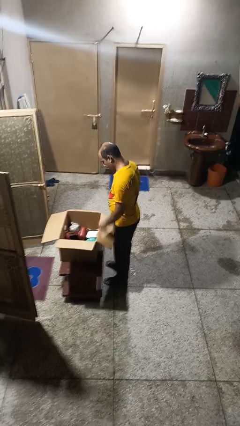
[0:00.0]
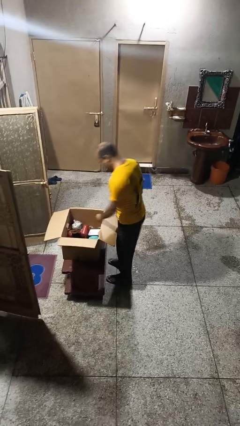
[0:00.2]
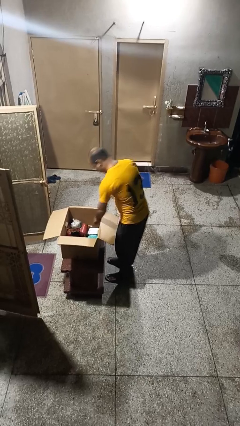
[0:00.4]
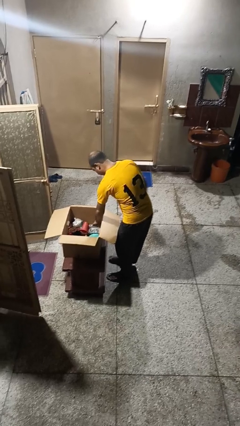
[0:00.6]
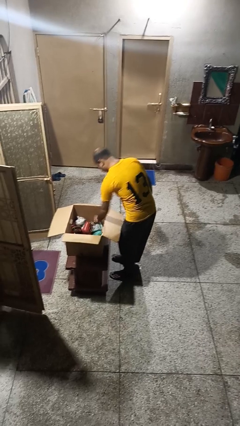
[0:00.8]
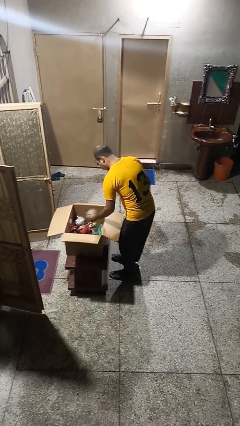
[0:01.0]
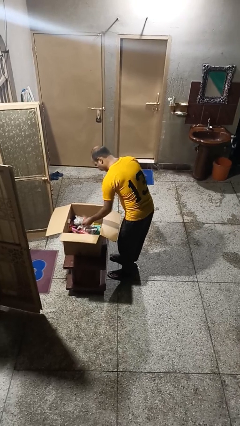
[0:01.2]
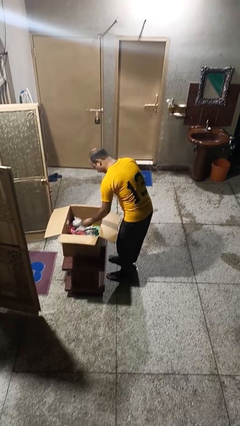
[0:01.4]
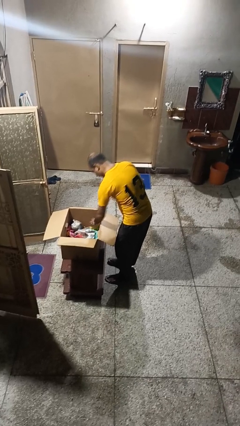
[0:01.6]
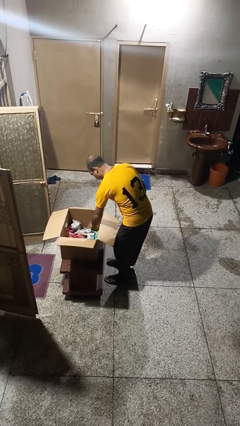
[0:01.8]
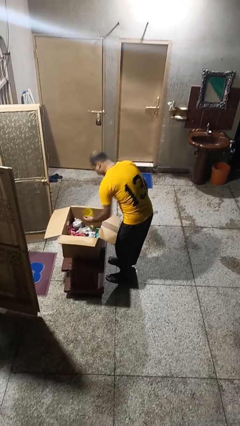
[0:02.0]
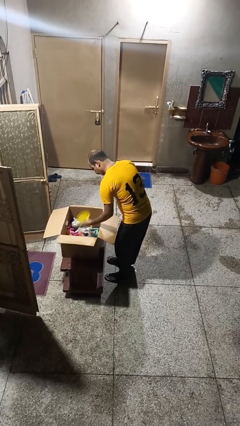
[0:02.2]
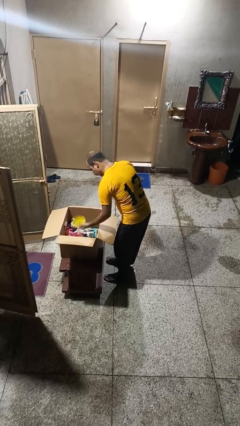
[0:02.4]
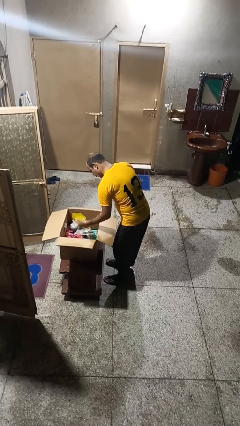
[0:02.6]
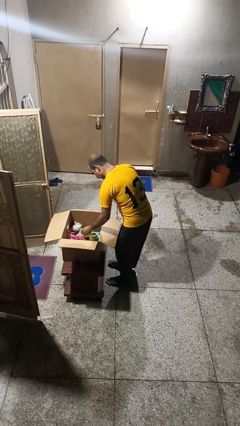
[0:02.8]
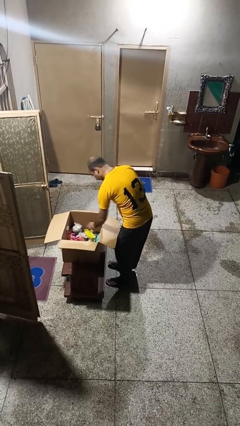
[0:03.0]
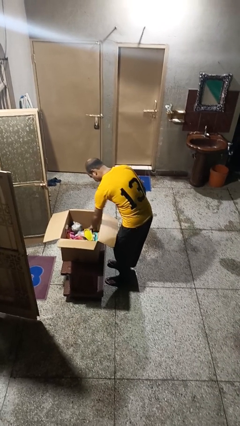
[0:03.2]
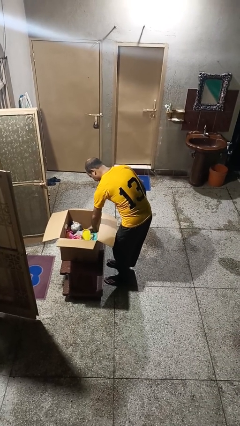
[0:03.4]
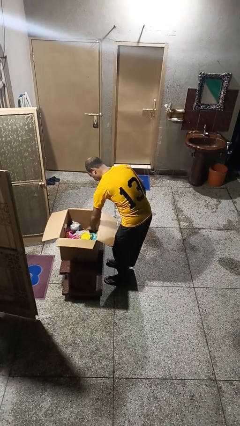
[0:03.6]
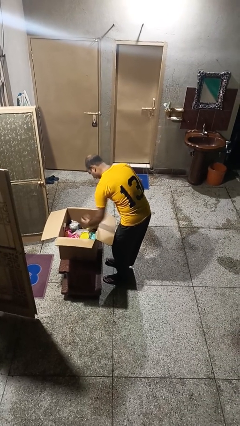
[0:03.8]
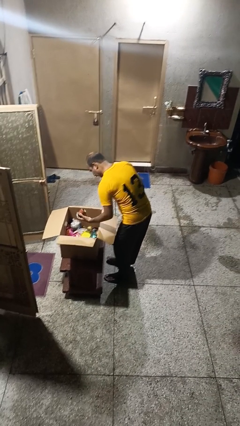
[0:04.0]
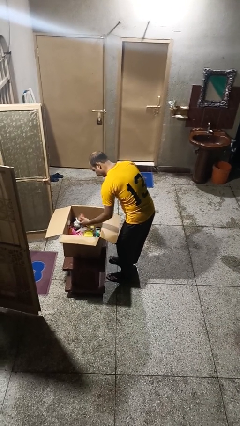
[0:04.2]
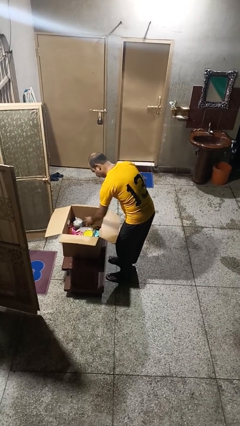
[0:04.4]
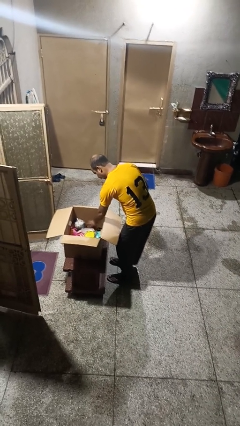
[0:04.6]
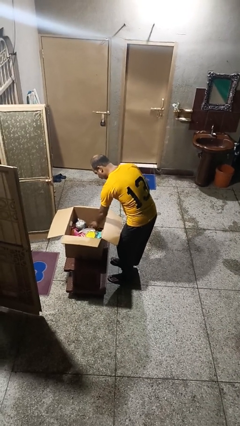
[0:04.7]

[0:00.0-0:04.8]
person searches in box

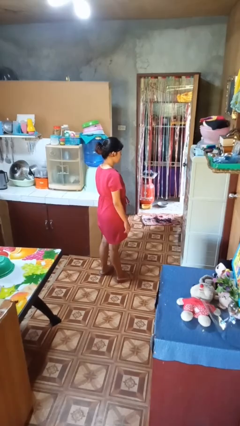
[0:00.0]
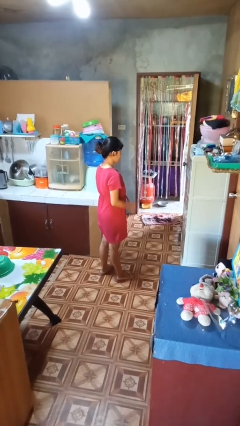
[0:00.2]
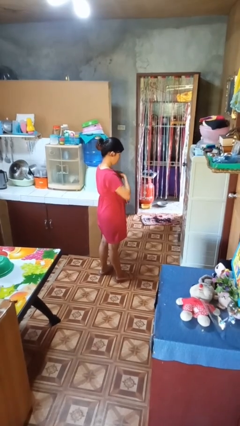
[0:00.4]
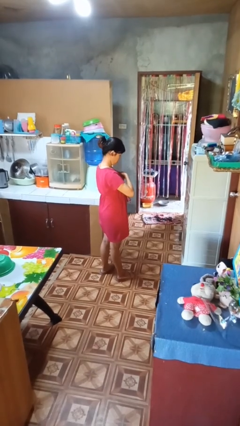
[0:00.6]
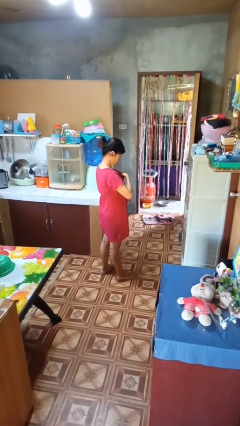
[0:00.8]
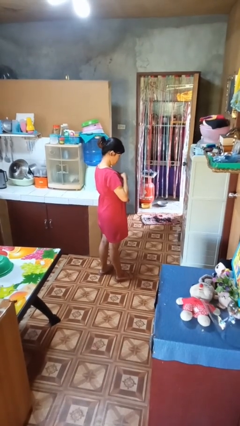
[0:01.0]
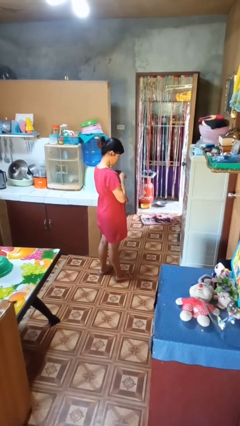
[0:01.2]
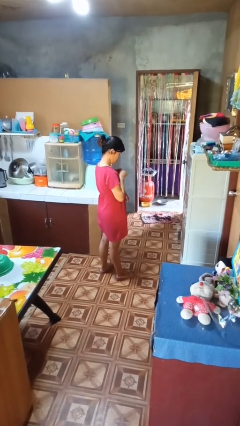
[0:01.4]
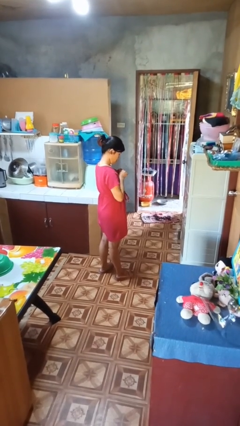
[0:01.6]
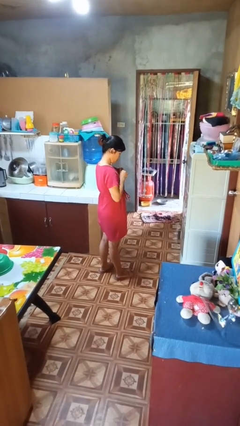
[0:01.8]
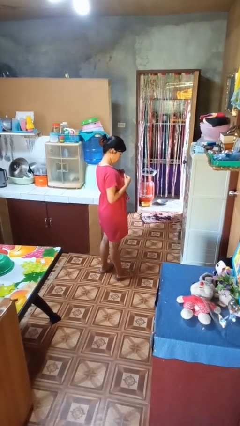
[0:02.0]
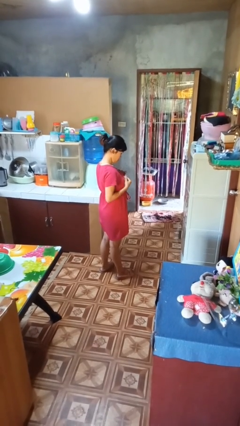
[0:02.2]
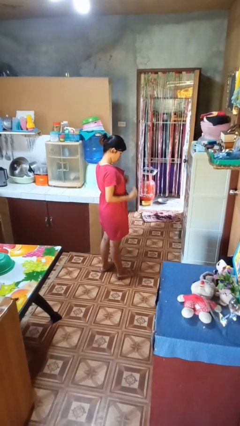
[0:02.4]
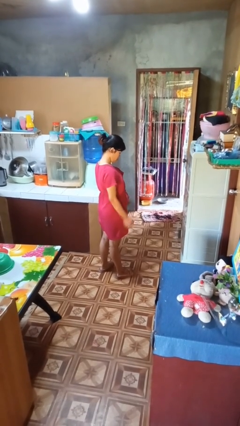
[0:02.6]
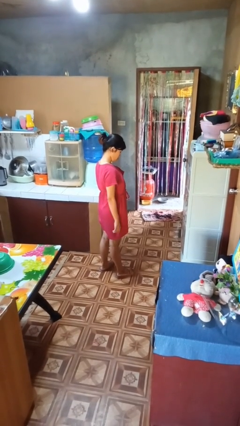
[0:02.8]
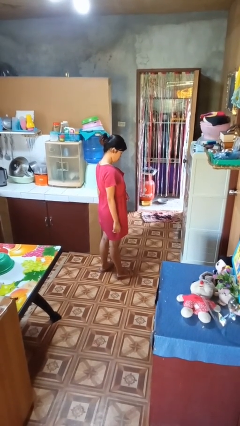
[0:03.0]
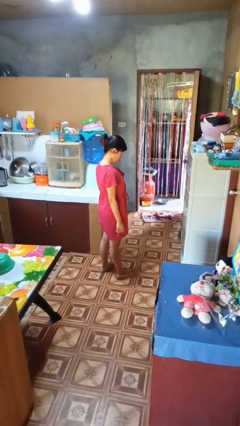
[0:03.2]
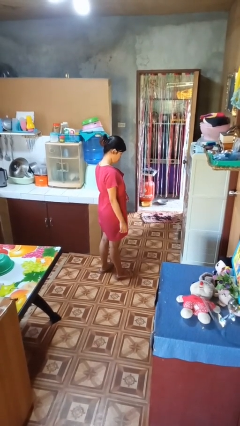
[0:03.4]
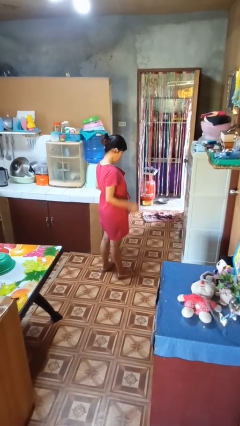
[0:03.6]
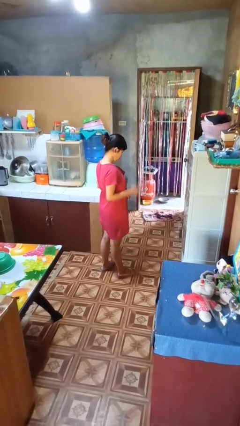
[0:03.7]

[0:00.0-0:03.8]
person unbuttons shirt

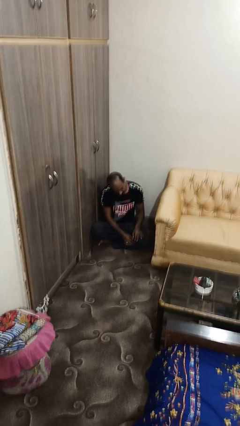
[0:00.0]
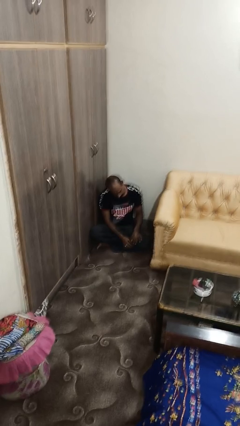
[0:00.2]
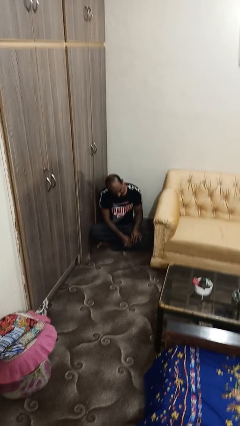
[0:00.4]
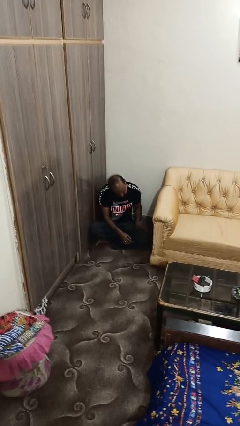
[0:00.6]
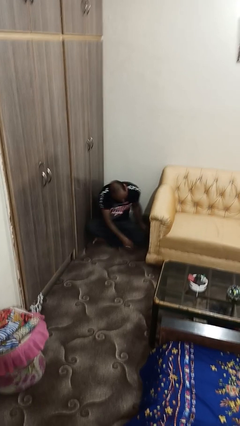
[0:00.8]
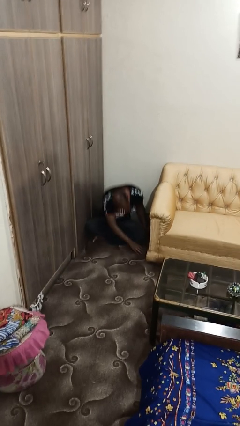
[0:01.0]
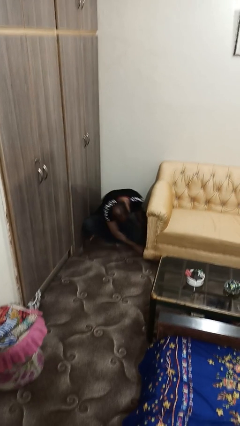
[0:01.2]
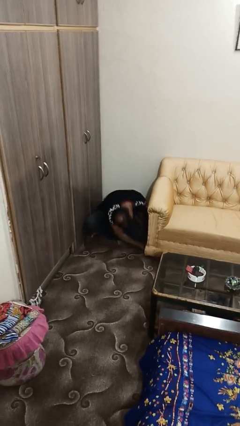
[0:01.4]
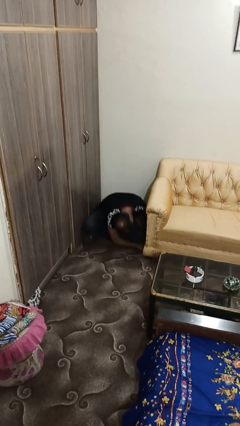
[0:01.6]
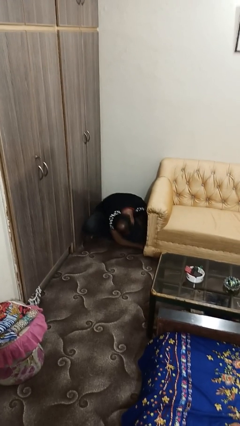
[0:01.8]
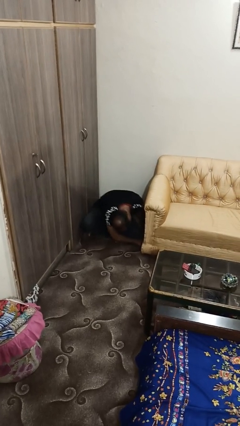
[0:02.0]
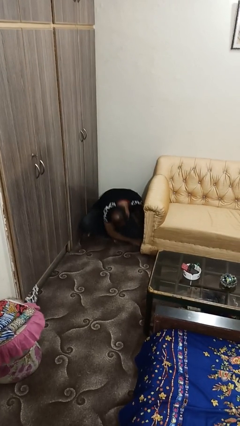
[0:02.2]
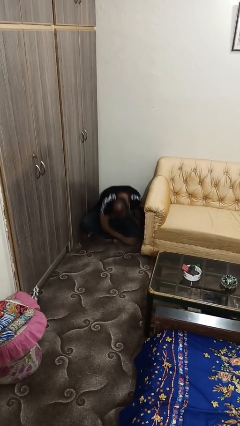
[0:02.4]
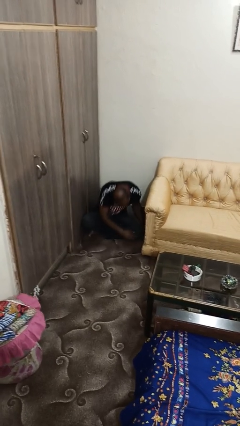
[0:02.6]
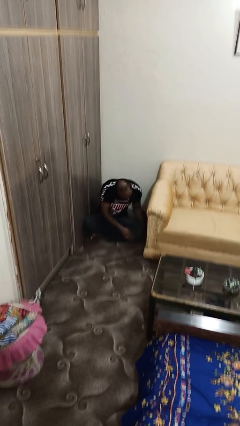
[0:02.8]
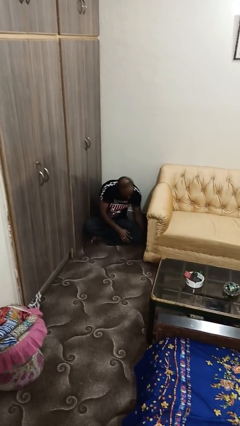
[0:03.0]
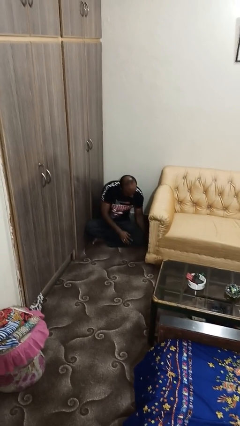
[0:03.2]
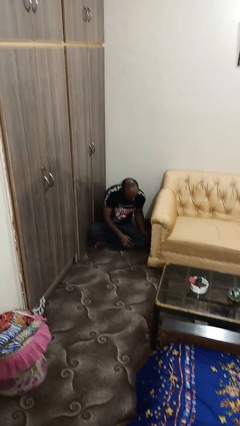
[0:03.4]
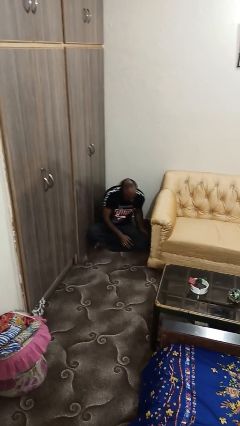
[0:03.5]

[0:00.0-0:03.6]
person searches under couch

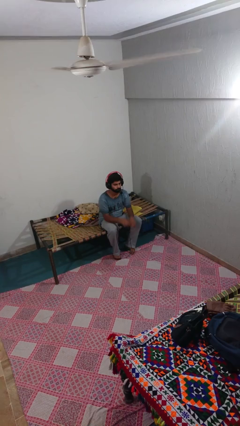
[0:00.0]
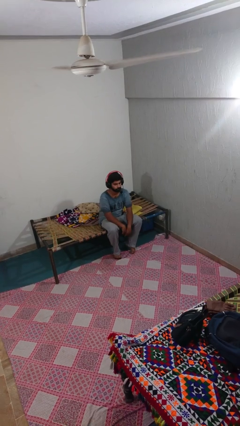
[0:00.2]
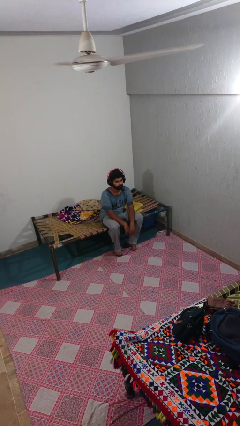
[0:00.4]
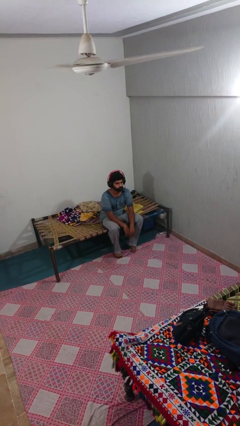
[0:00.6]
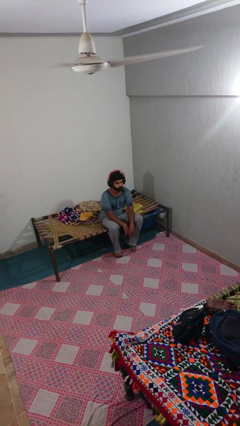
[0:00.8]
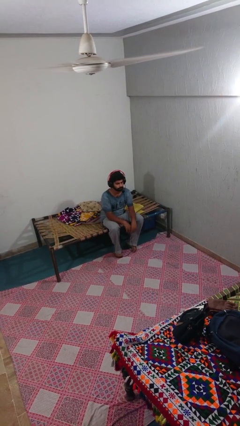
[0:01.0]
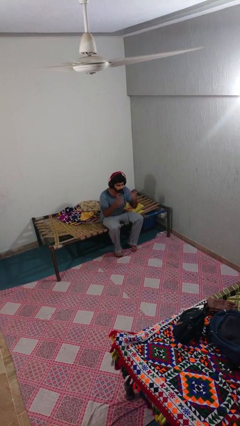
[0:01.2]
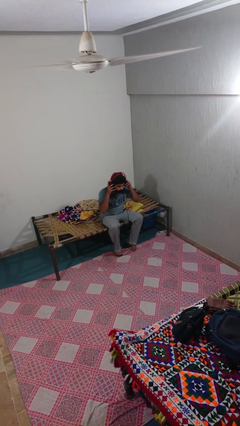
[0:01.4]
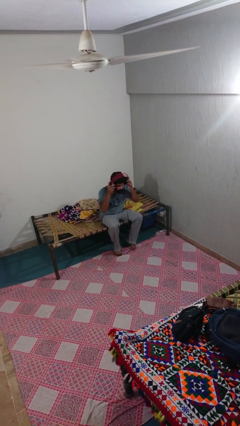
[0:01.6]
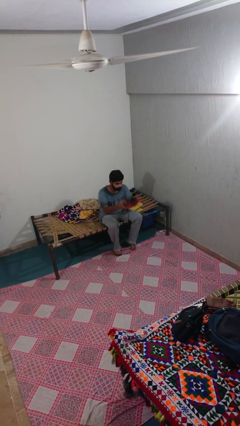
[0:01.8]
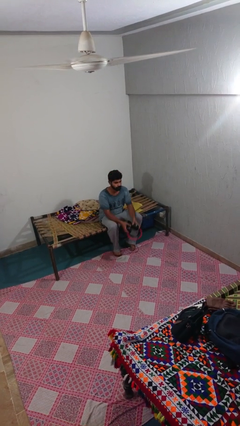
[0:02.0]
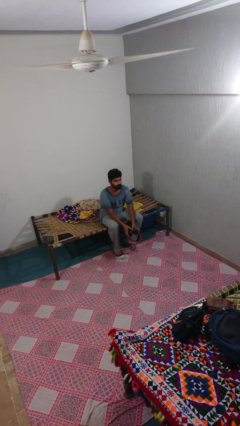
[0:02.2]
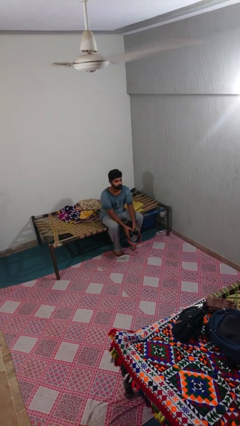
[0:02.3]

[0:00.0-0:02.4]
person takes off headphones

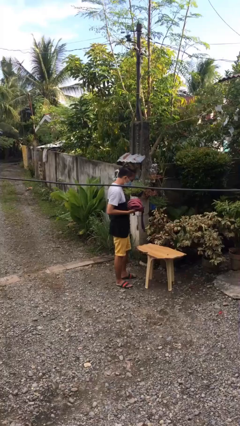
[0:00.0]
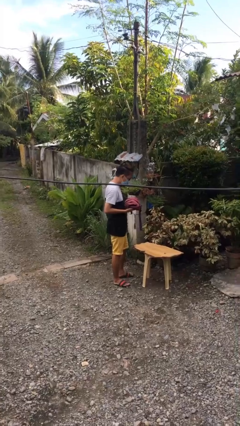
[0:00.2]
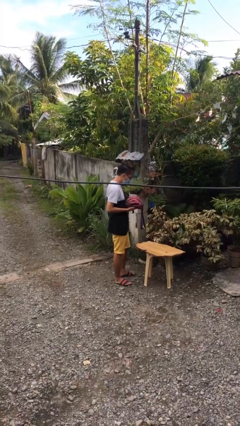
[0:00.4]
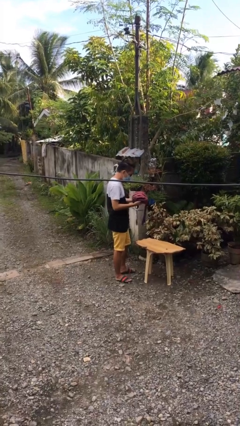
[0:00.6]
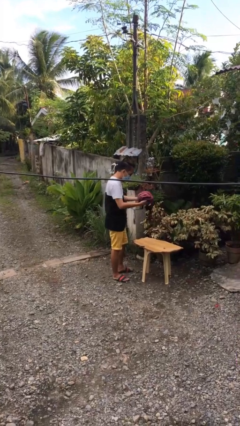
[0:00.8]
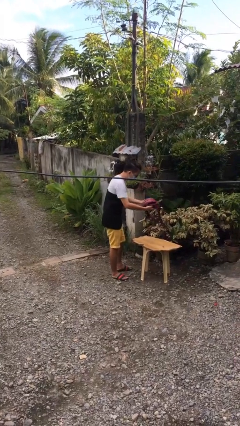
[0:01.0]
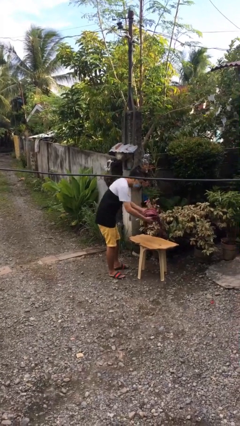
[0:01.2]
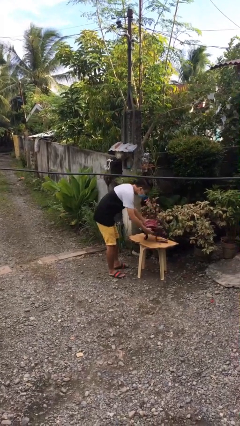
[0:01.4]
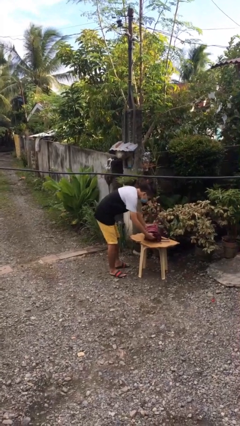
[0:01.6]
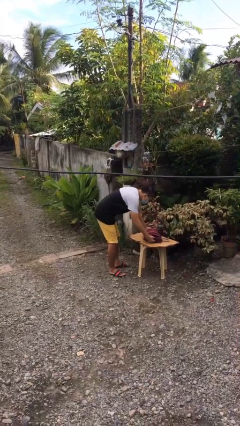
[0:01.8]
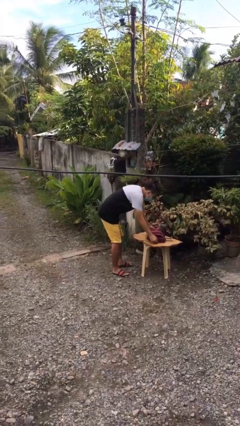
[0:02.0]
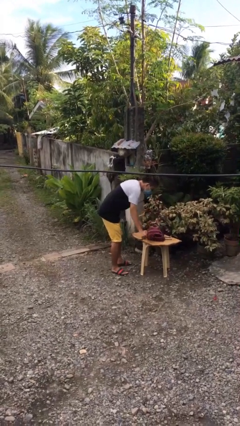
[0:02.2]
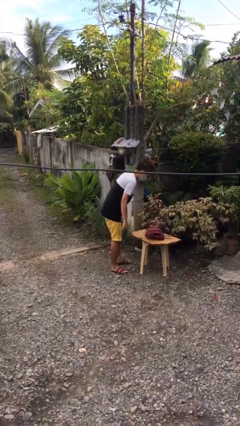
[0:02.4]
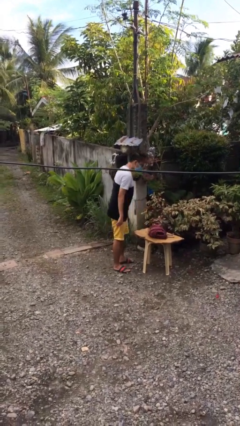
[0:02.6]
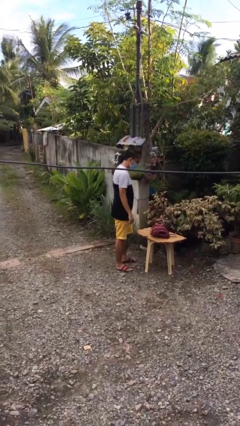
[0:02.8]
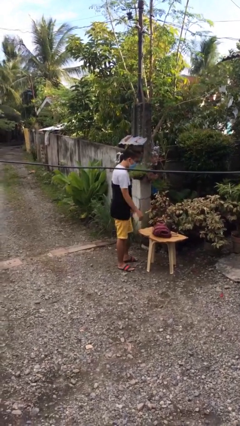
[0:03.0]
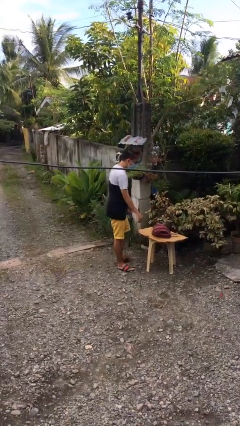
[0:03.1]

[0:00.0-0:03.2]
person puts down object on table
